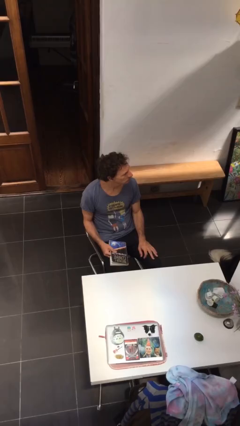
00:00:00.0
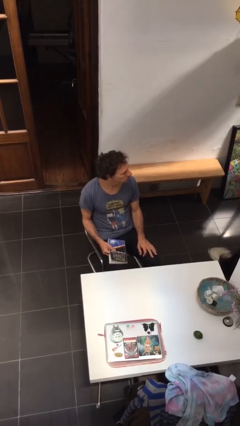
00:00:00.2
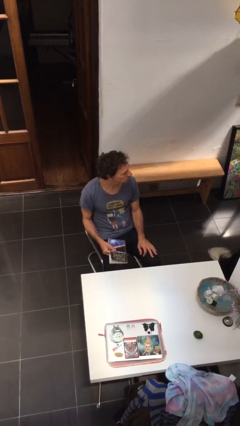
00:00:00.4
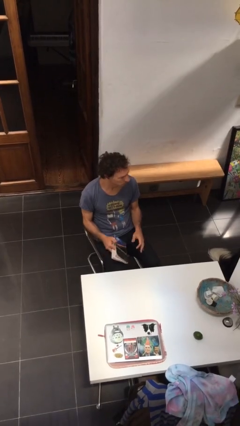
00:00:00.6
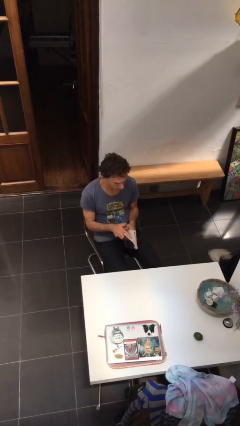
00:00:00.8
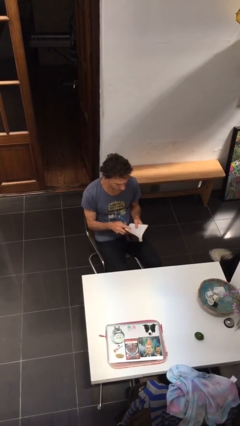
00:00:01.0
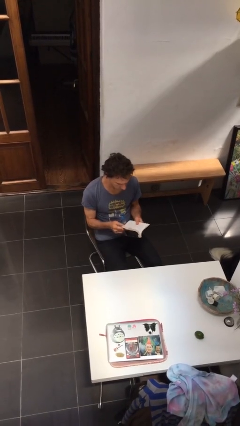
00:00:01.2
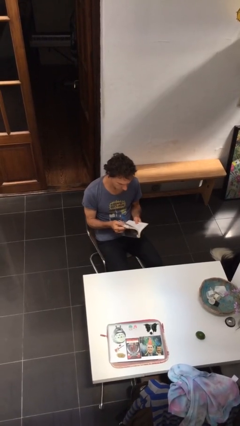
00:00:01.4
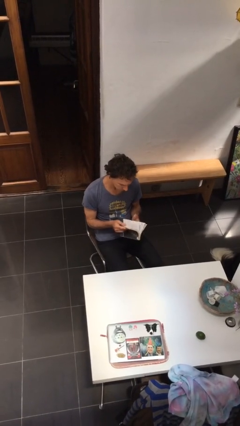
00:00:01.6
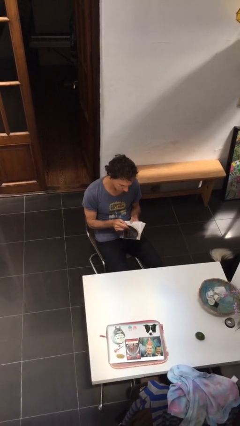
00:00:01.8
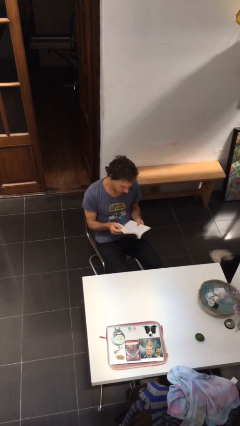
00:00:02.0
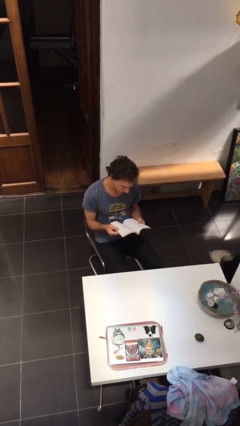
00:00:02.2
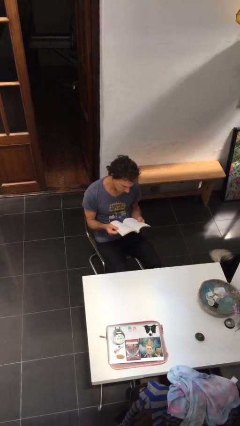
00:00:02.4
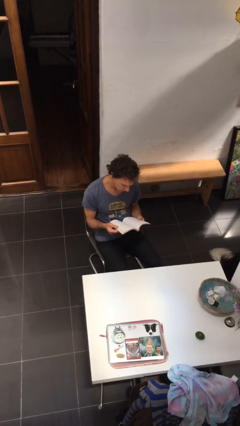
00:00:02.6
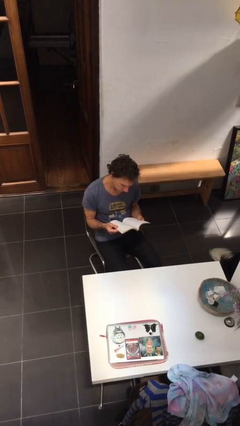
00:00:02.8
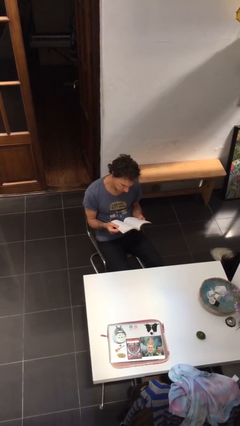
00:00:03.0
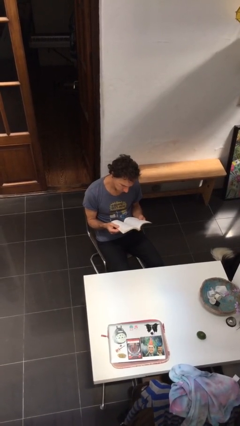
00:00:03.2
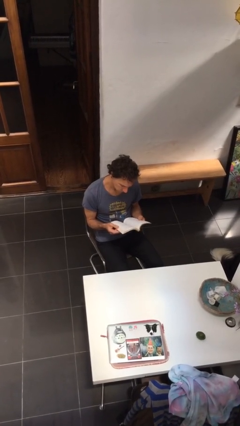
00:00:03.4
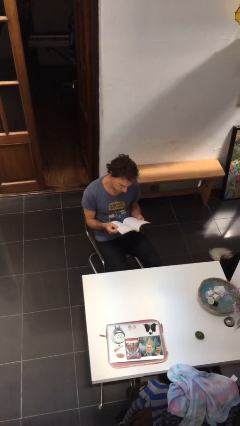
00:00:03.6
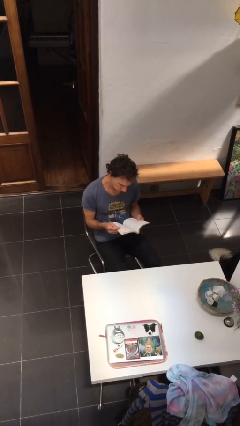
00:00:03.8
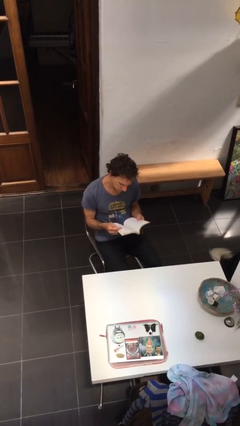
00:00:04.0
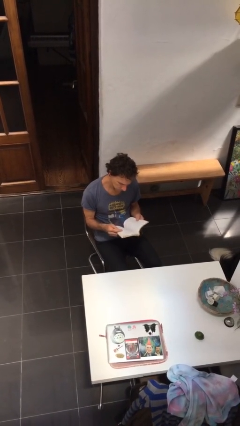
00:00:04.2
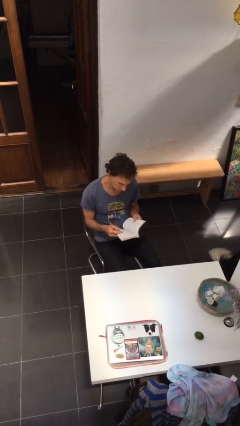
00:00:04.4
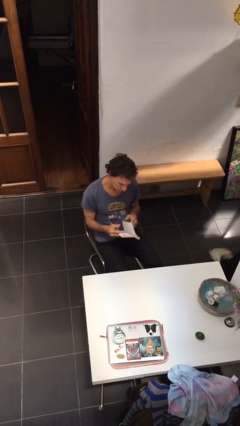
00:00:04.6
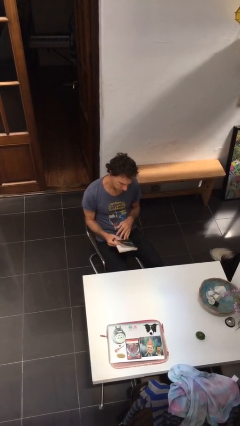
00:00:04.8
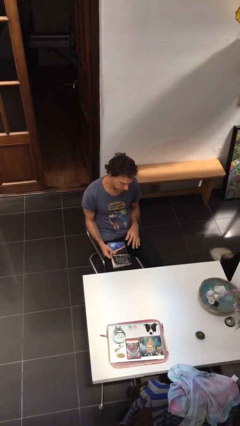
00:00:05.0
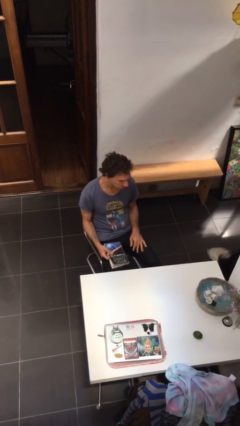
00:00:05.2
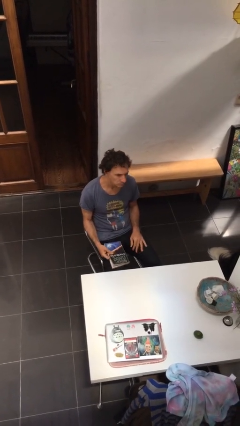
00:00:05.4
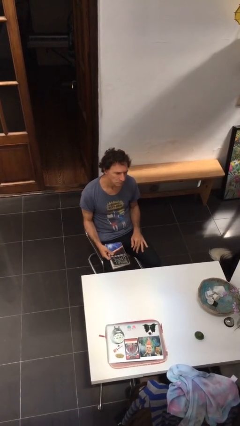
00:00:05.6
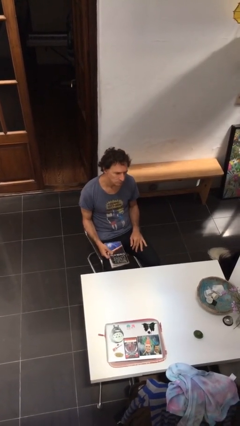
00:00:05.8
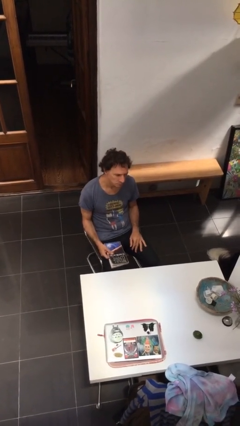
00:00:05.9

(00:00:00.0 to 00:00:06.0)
person reads document

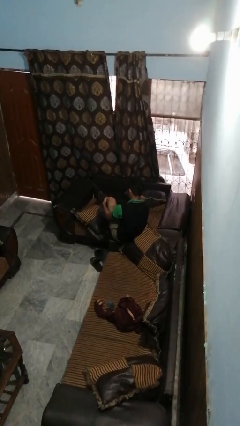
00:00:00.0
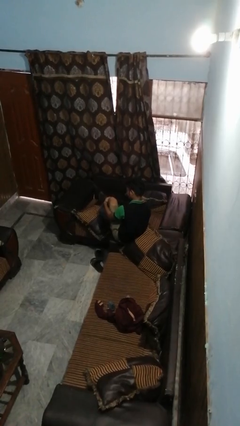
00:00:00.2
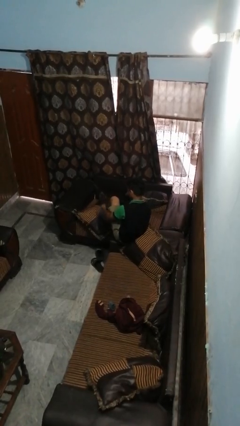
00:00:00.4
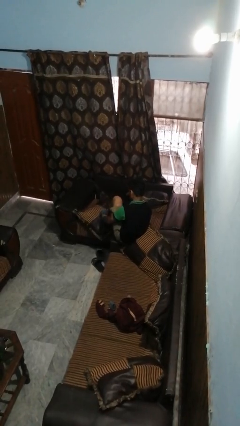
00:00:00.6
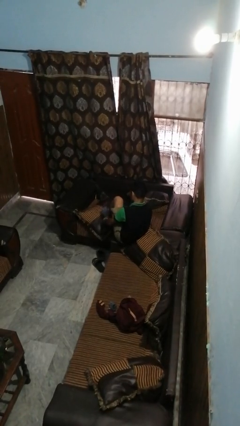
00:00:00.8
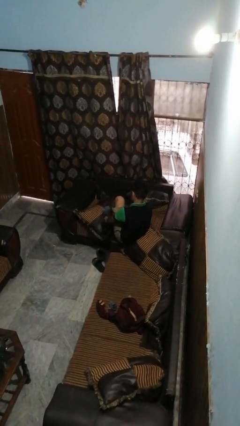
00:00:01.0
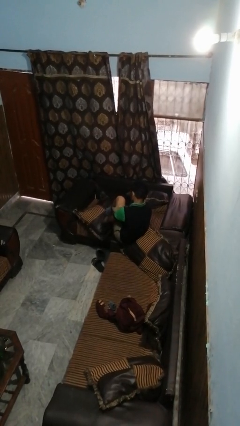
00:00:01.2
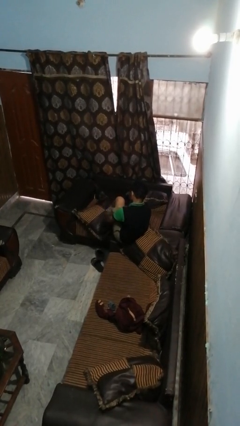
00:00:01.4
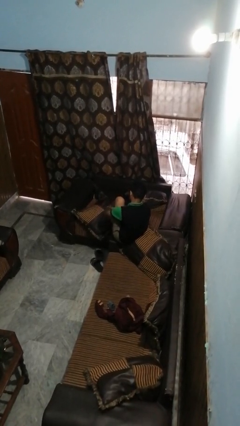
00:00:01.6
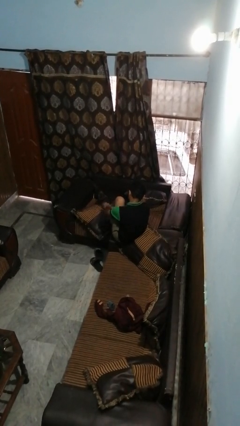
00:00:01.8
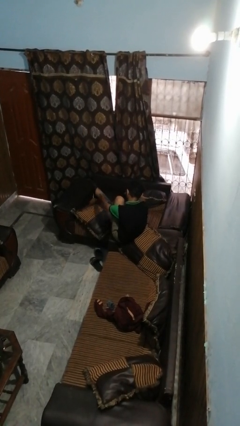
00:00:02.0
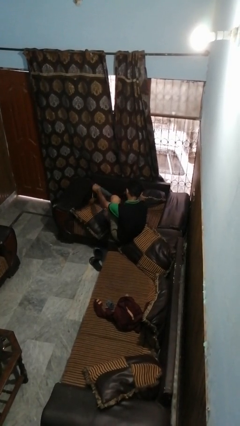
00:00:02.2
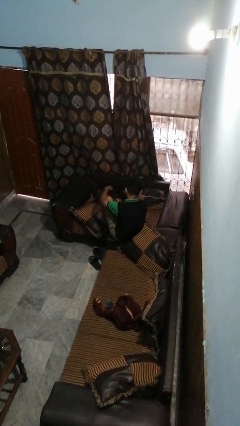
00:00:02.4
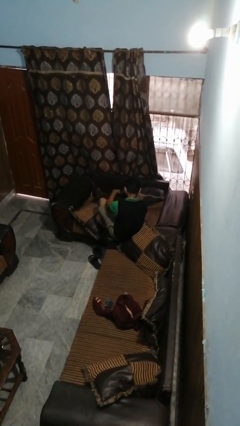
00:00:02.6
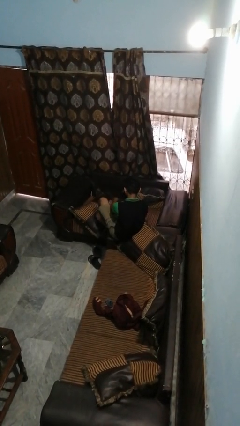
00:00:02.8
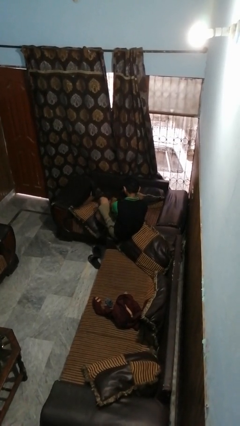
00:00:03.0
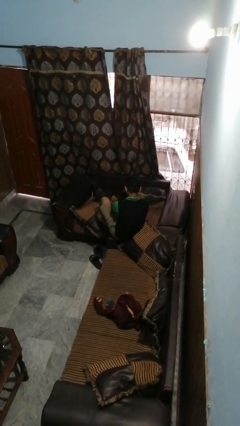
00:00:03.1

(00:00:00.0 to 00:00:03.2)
person takes off socks

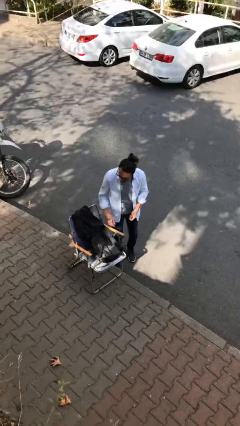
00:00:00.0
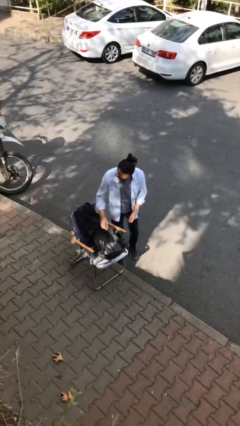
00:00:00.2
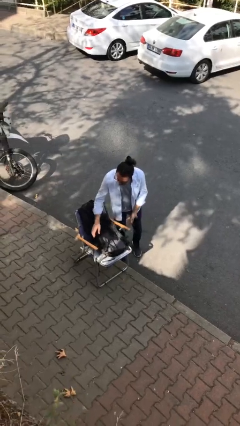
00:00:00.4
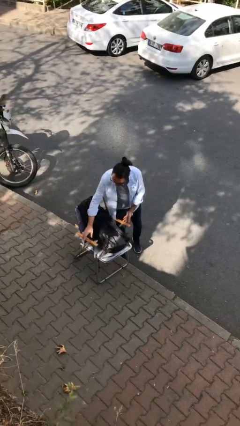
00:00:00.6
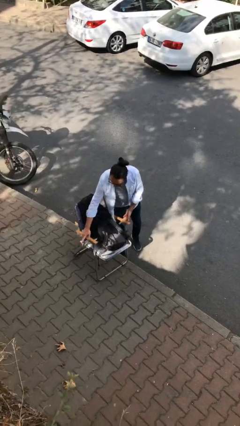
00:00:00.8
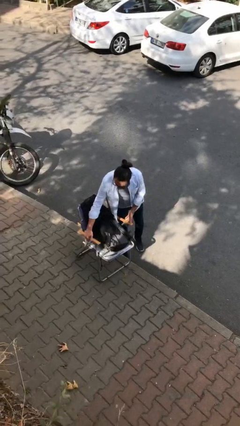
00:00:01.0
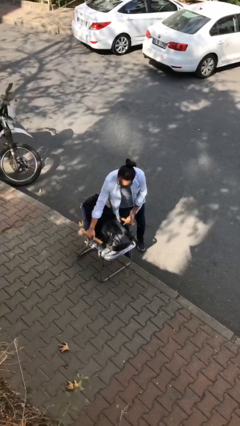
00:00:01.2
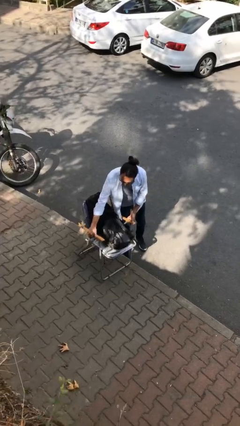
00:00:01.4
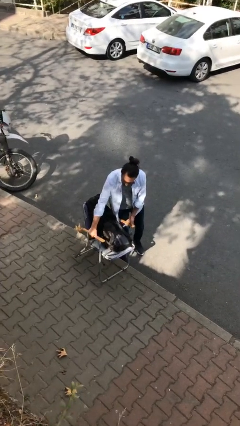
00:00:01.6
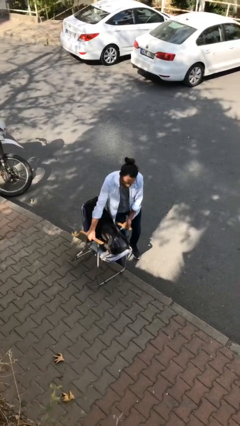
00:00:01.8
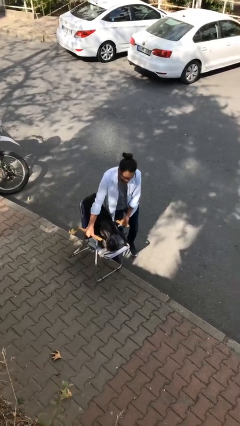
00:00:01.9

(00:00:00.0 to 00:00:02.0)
person picks up object from floor

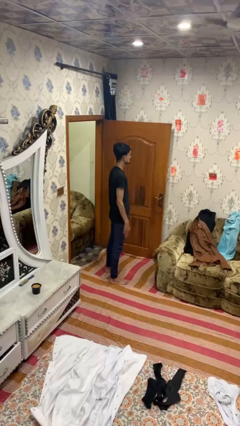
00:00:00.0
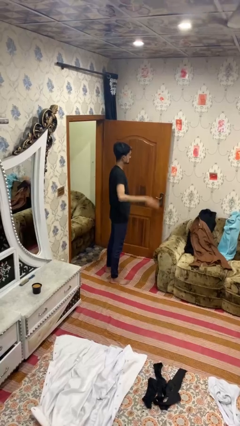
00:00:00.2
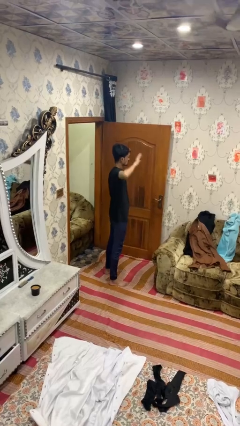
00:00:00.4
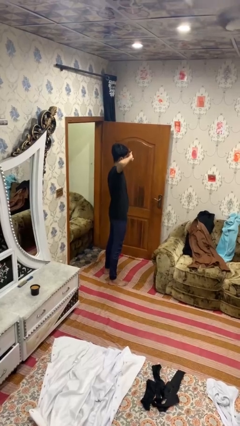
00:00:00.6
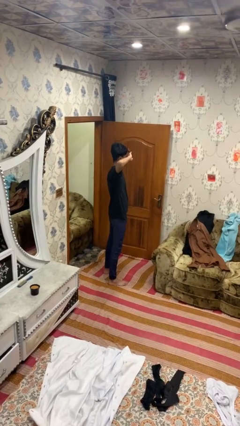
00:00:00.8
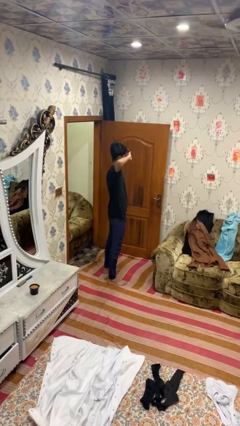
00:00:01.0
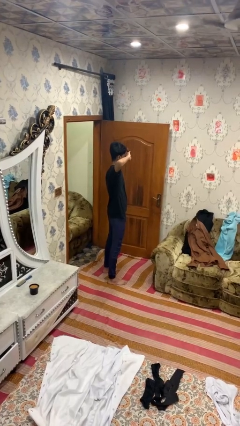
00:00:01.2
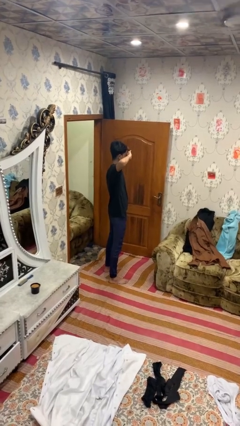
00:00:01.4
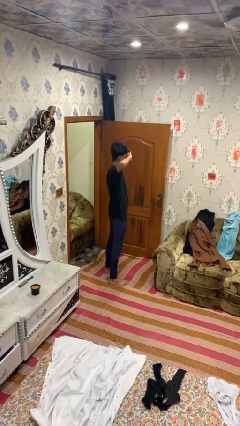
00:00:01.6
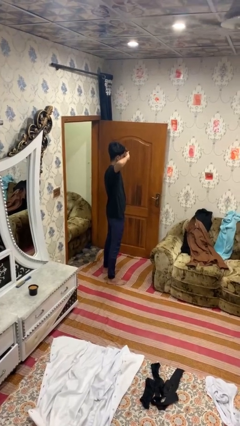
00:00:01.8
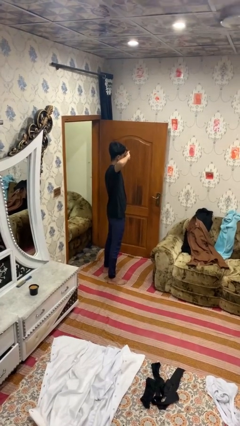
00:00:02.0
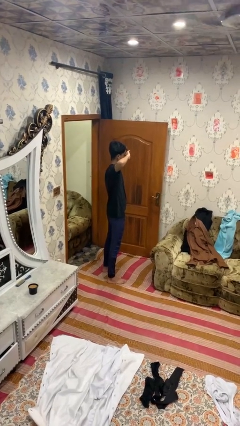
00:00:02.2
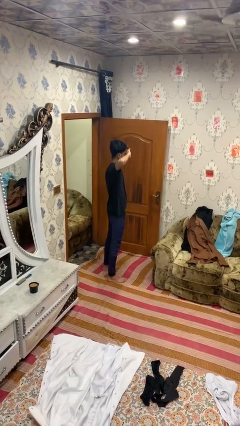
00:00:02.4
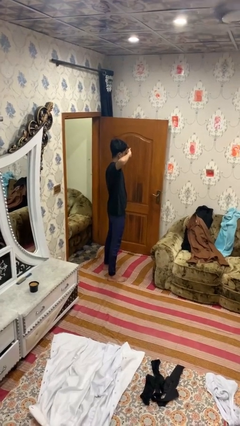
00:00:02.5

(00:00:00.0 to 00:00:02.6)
person salutes

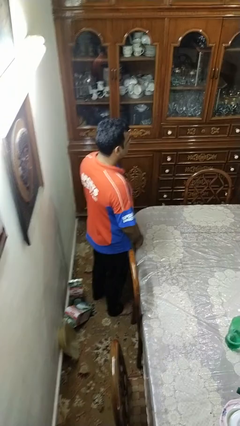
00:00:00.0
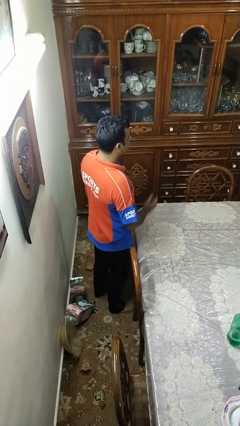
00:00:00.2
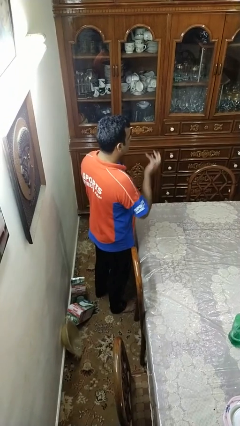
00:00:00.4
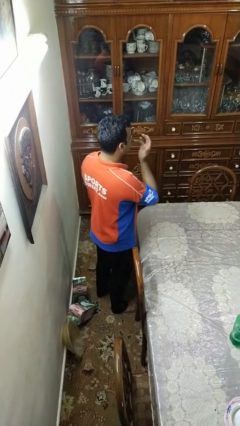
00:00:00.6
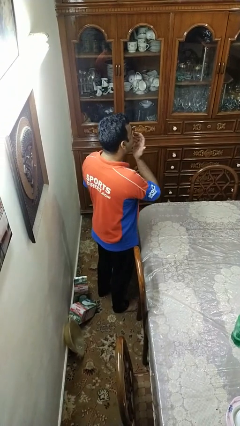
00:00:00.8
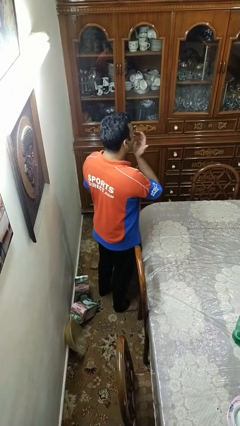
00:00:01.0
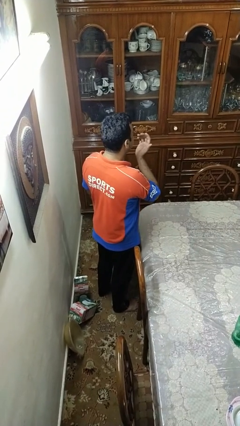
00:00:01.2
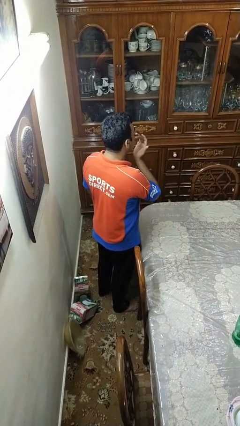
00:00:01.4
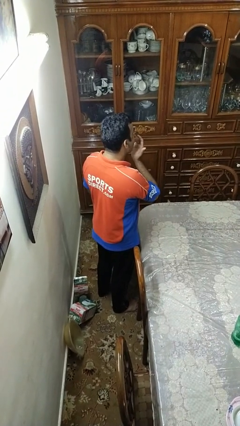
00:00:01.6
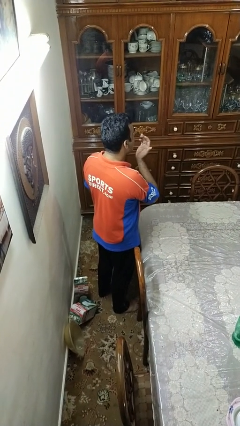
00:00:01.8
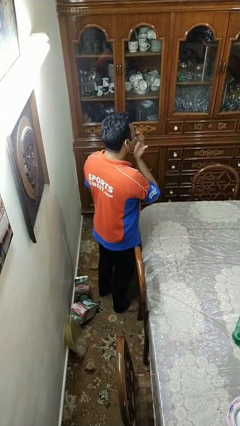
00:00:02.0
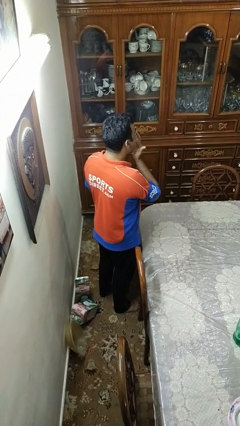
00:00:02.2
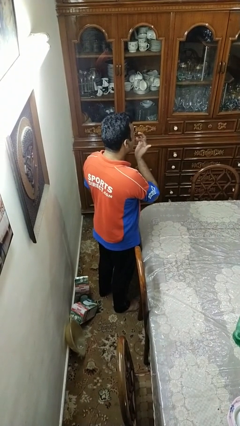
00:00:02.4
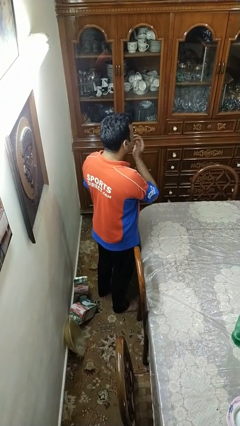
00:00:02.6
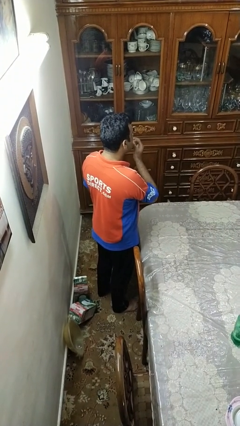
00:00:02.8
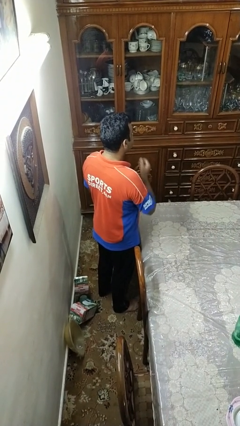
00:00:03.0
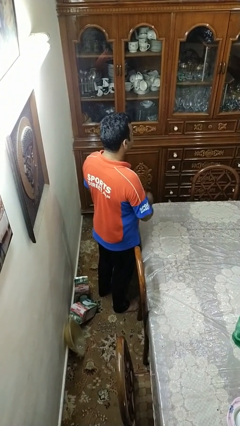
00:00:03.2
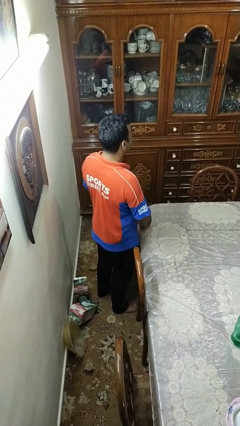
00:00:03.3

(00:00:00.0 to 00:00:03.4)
person licks fingers
